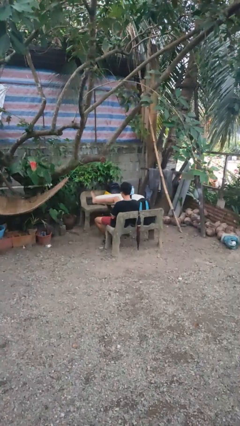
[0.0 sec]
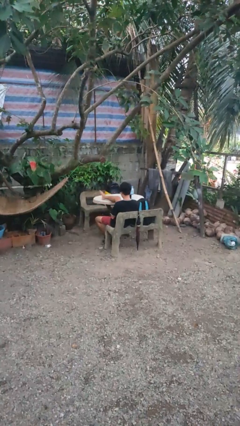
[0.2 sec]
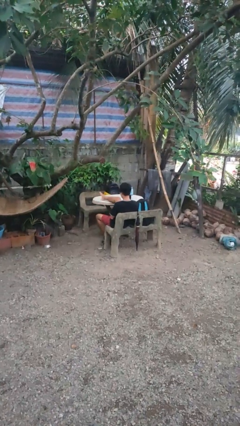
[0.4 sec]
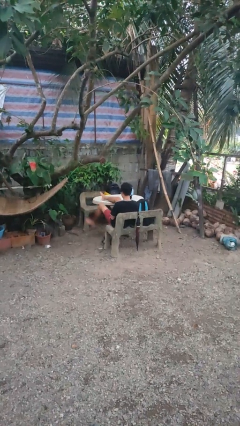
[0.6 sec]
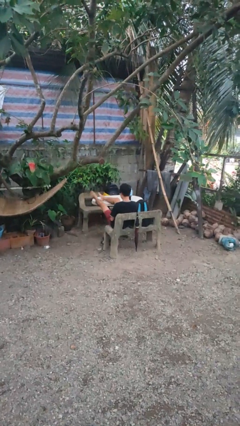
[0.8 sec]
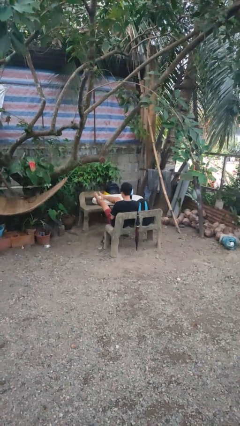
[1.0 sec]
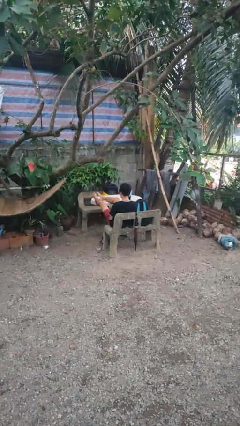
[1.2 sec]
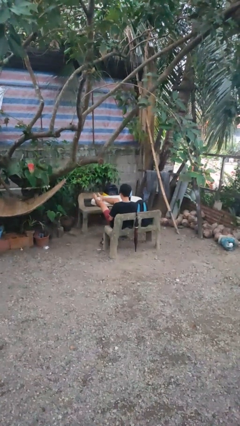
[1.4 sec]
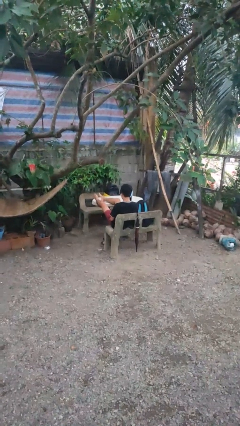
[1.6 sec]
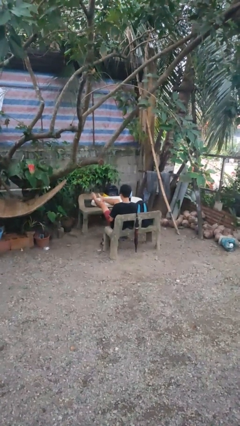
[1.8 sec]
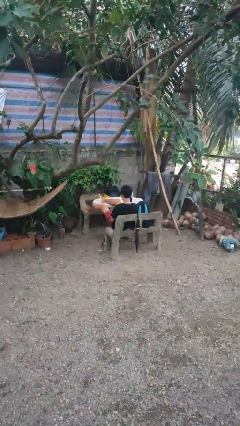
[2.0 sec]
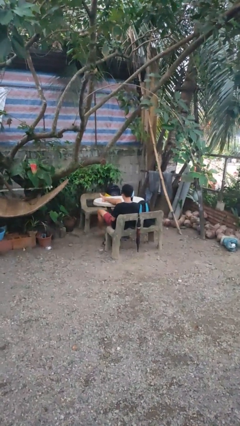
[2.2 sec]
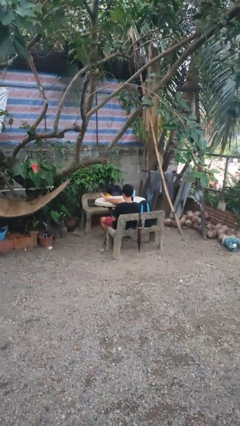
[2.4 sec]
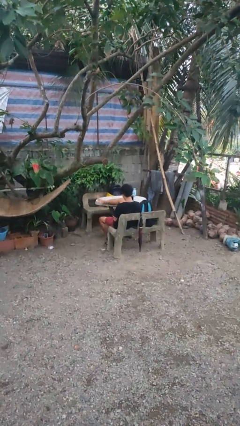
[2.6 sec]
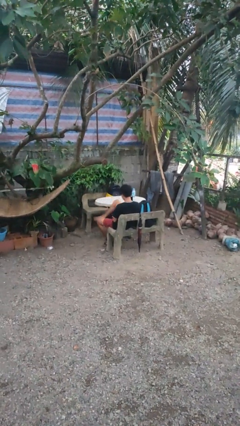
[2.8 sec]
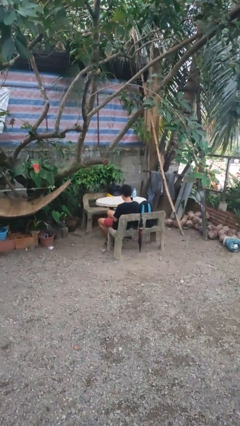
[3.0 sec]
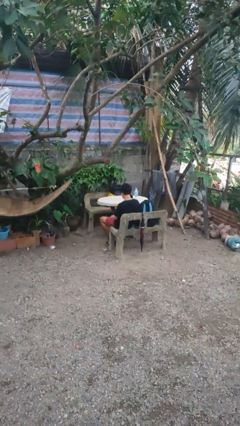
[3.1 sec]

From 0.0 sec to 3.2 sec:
person puts feet up

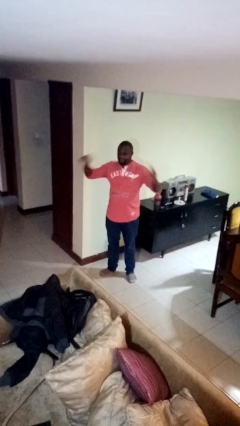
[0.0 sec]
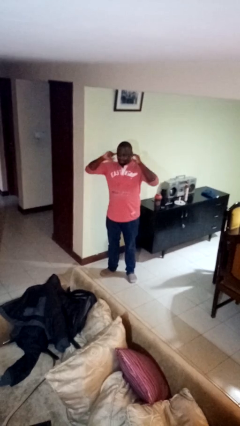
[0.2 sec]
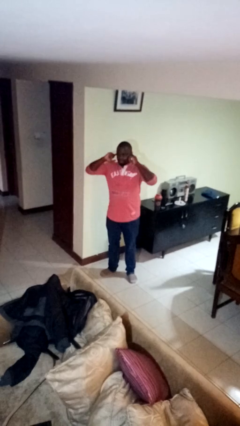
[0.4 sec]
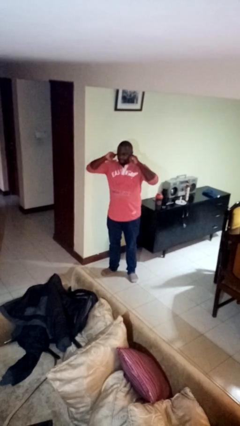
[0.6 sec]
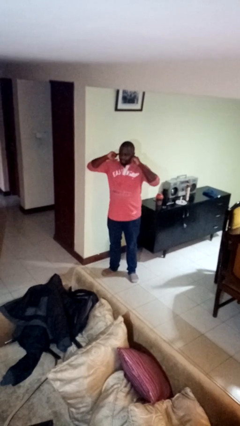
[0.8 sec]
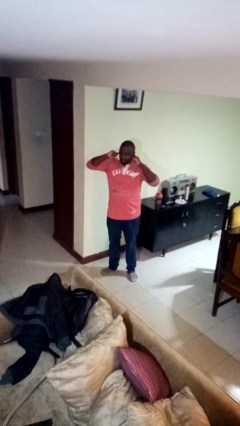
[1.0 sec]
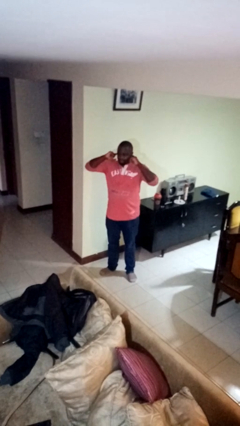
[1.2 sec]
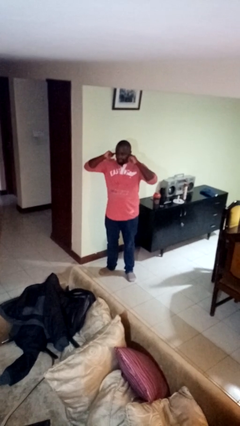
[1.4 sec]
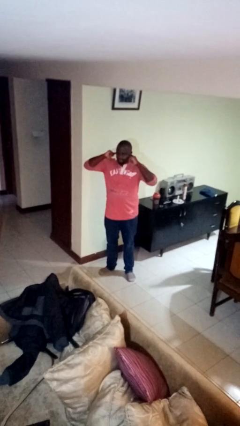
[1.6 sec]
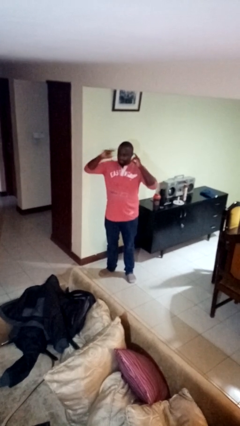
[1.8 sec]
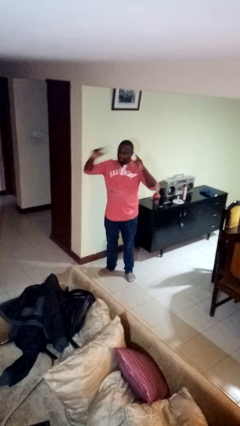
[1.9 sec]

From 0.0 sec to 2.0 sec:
person puts fingers in ear

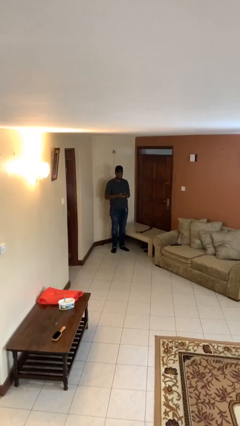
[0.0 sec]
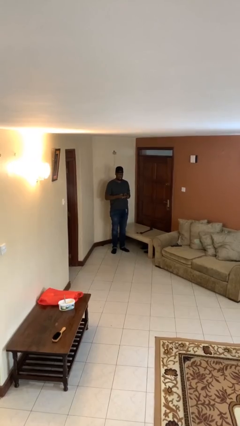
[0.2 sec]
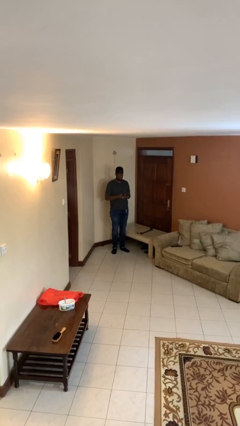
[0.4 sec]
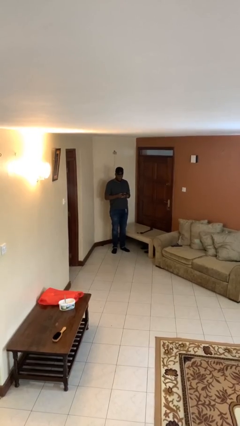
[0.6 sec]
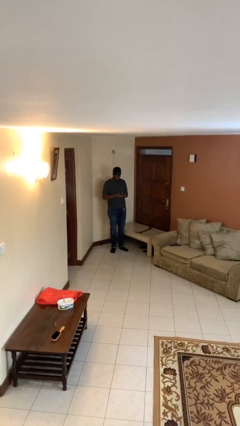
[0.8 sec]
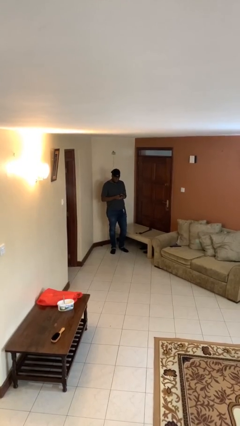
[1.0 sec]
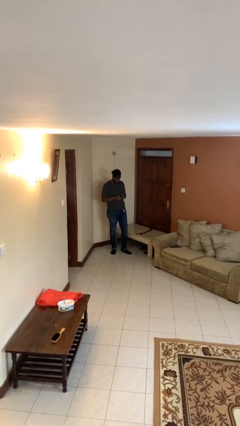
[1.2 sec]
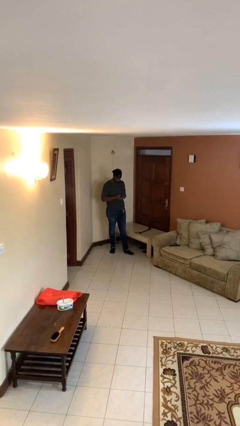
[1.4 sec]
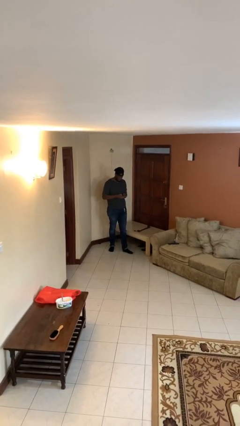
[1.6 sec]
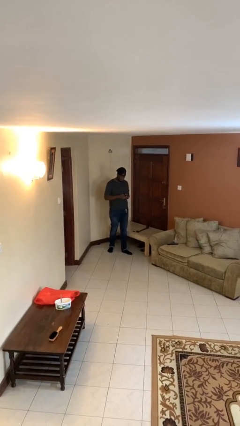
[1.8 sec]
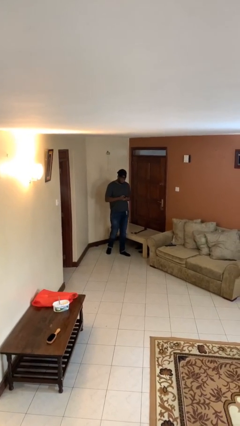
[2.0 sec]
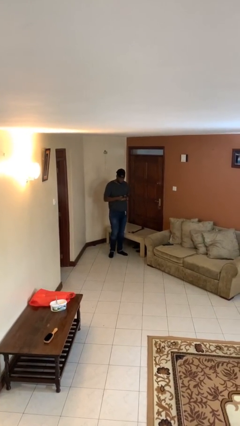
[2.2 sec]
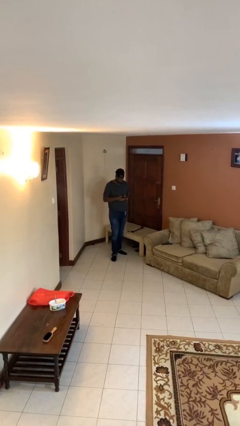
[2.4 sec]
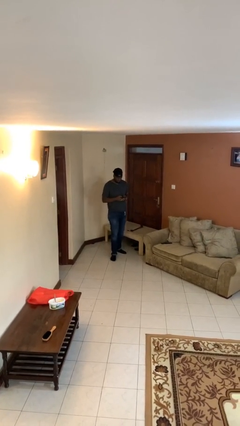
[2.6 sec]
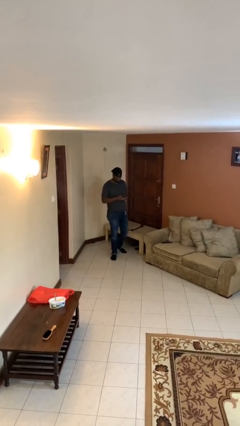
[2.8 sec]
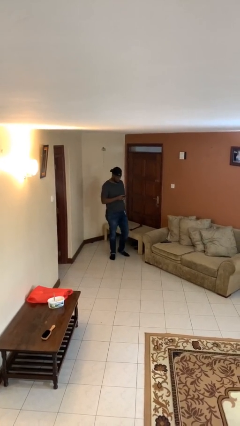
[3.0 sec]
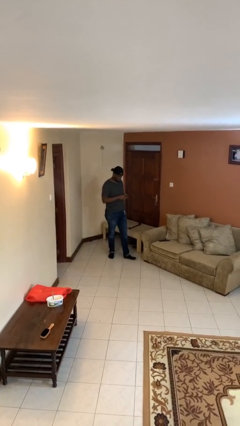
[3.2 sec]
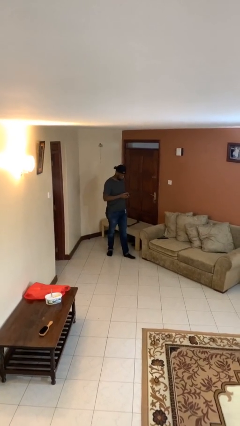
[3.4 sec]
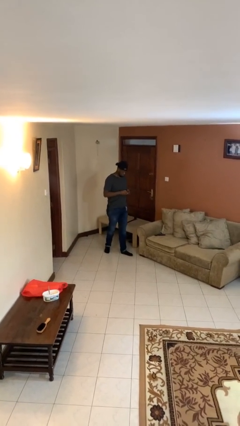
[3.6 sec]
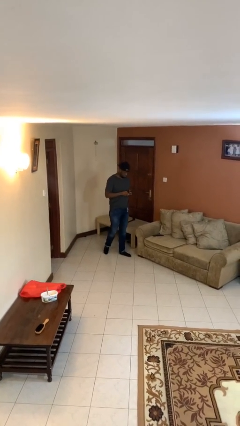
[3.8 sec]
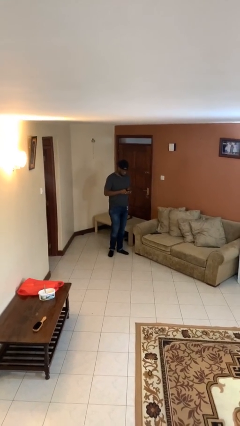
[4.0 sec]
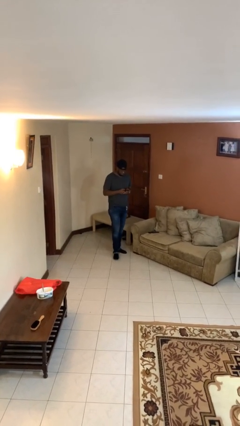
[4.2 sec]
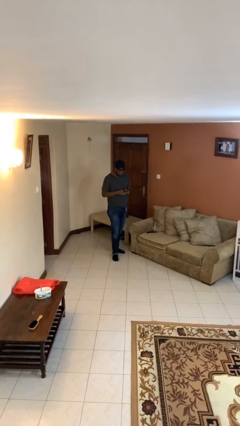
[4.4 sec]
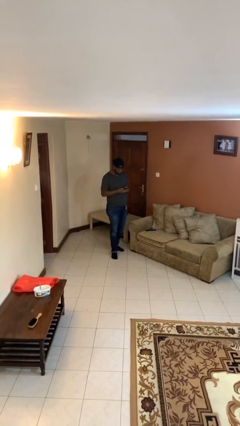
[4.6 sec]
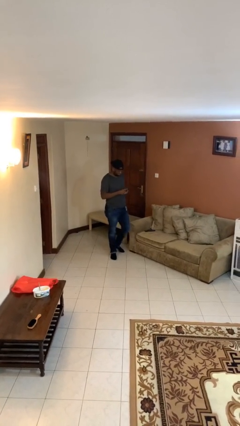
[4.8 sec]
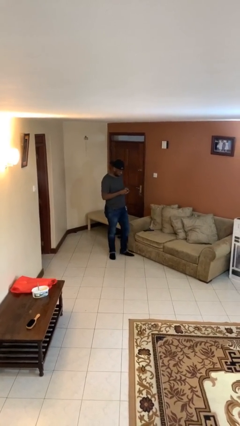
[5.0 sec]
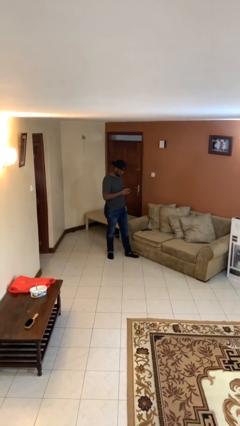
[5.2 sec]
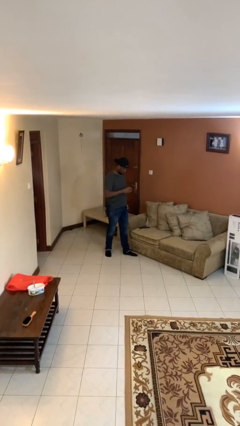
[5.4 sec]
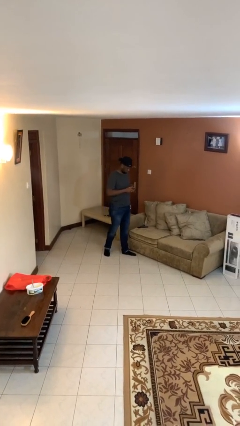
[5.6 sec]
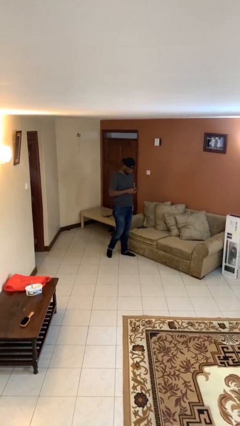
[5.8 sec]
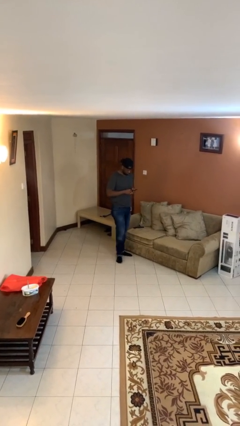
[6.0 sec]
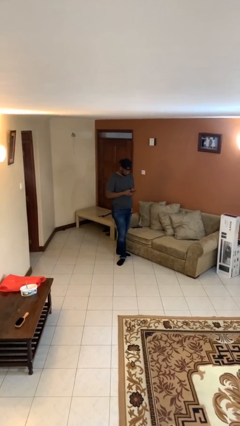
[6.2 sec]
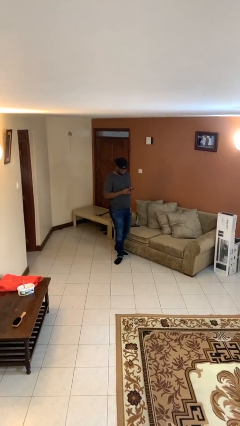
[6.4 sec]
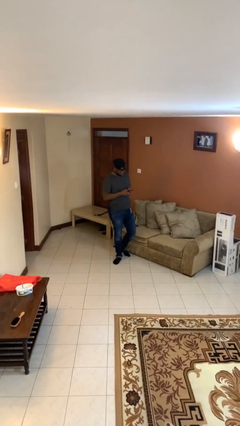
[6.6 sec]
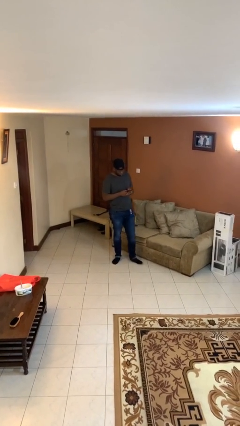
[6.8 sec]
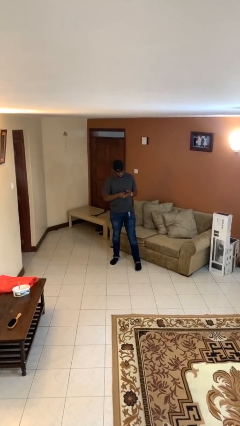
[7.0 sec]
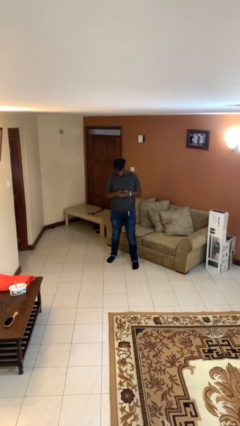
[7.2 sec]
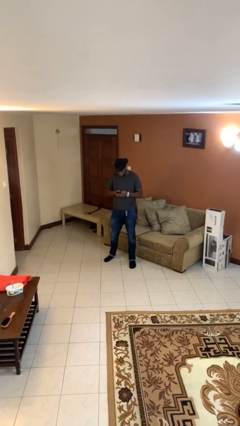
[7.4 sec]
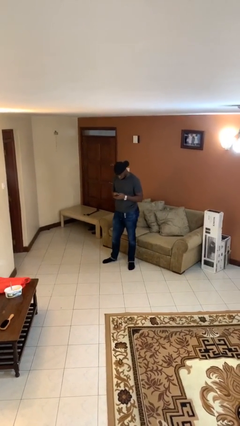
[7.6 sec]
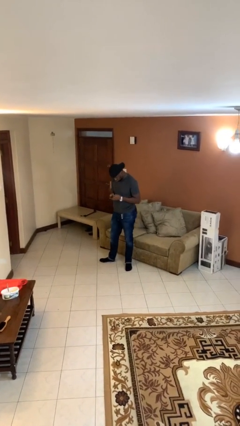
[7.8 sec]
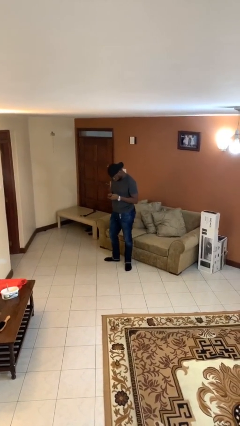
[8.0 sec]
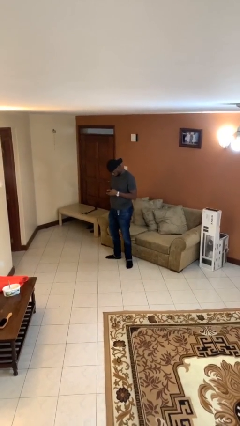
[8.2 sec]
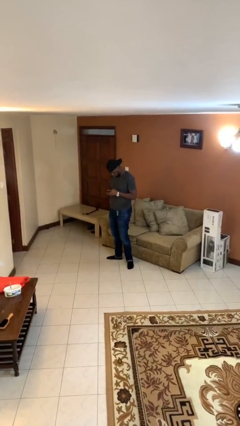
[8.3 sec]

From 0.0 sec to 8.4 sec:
person texts on phone

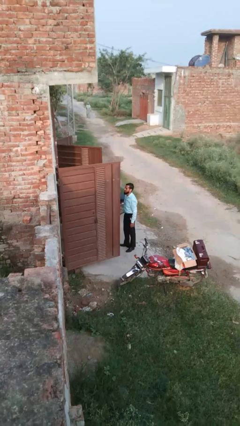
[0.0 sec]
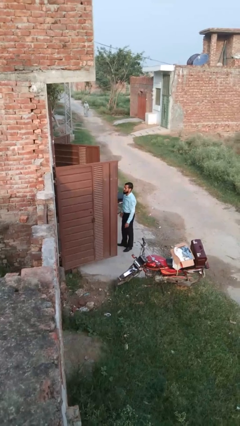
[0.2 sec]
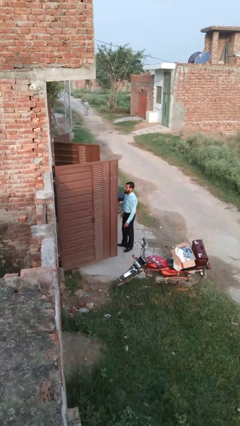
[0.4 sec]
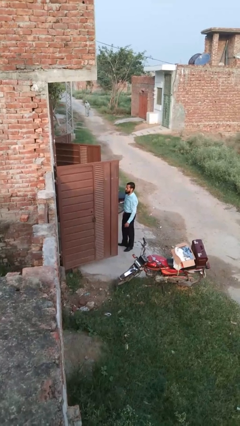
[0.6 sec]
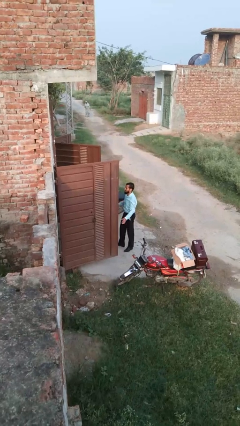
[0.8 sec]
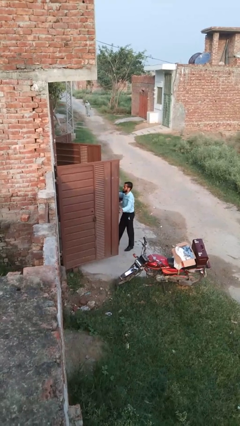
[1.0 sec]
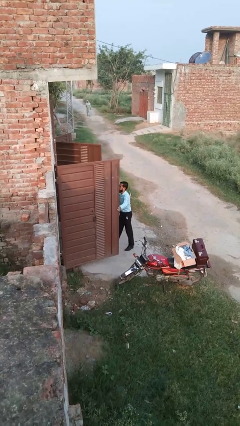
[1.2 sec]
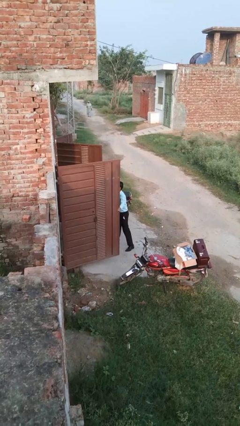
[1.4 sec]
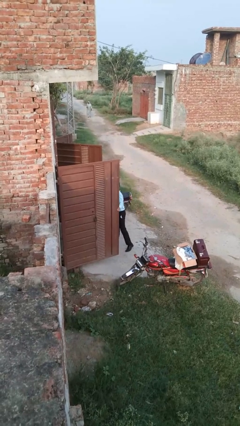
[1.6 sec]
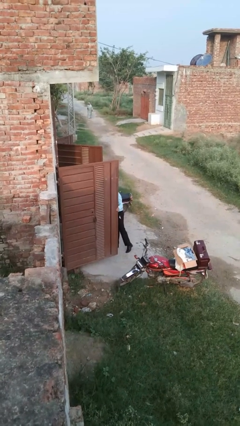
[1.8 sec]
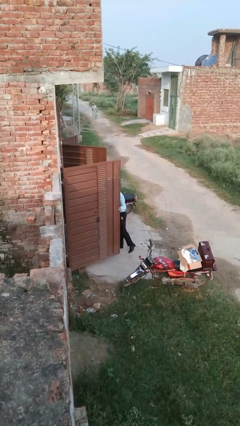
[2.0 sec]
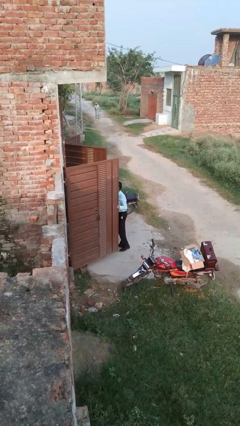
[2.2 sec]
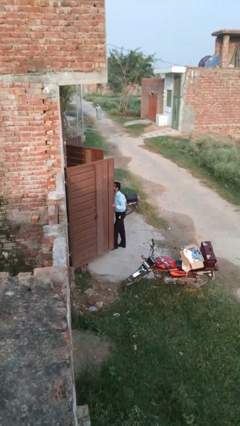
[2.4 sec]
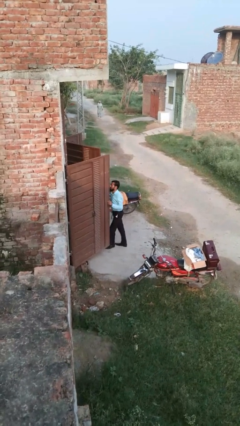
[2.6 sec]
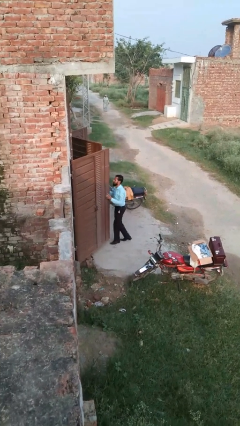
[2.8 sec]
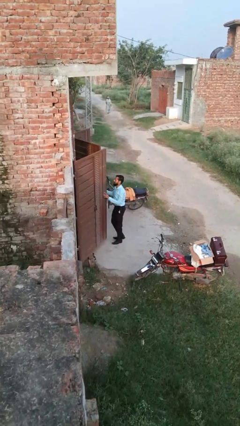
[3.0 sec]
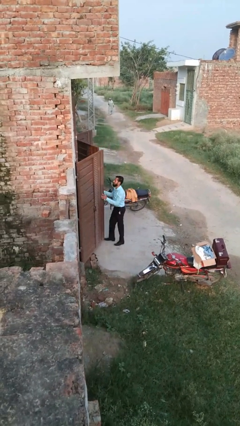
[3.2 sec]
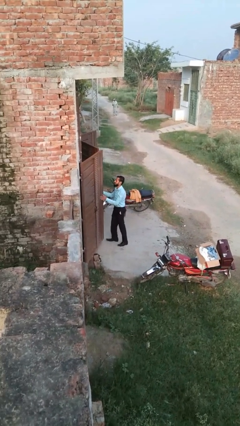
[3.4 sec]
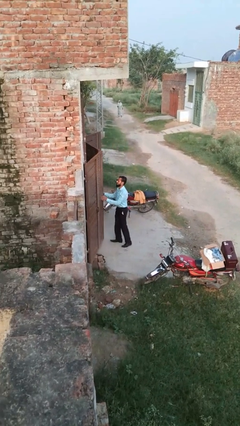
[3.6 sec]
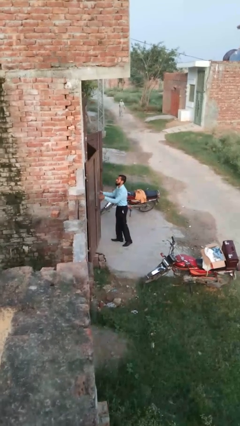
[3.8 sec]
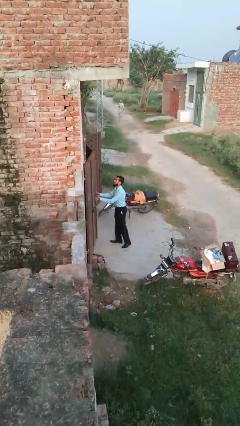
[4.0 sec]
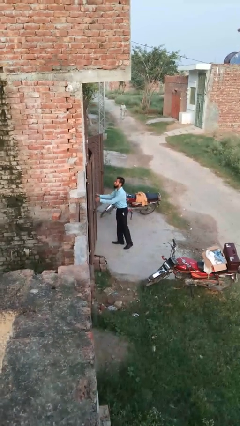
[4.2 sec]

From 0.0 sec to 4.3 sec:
person closes gate
